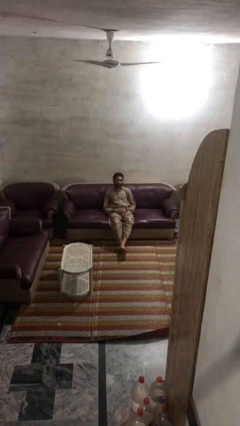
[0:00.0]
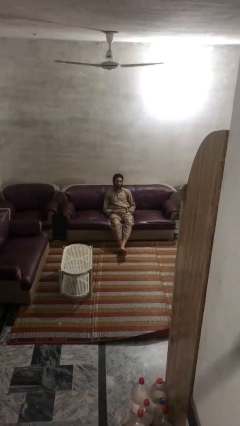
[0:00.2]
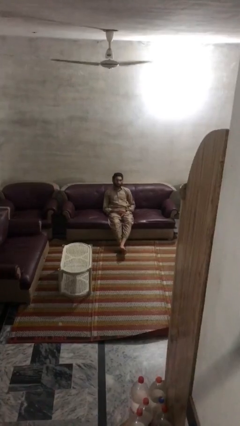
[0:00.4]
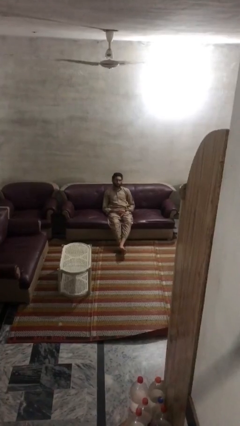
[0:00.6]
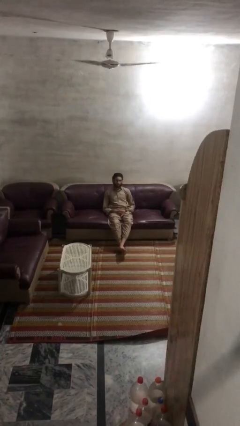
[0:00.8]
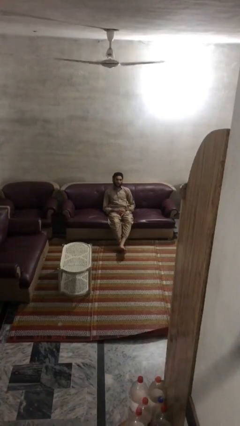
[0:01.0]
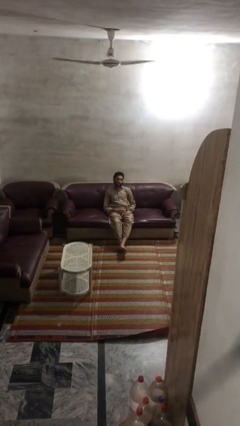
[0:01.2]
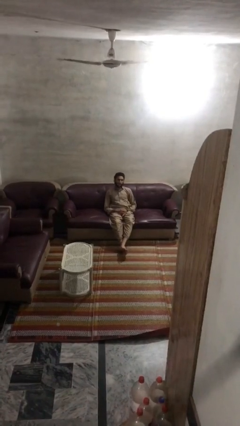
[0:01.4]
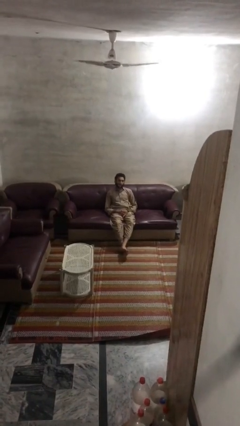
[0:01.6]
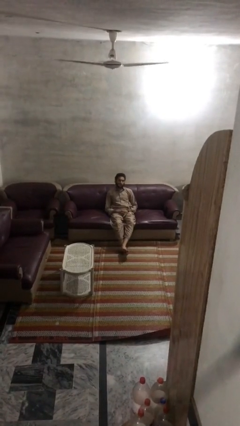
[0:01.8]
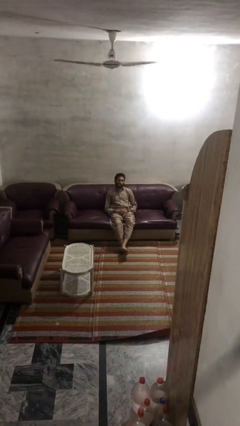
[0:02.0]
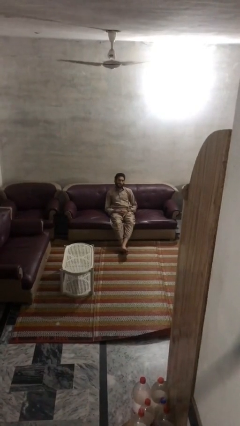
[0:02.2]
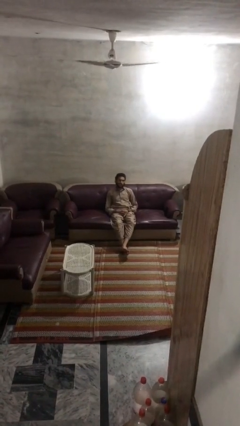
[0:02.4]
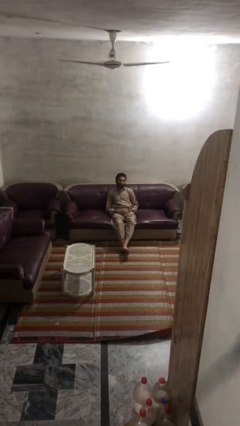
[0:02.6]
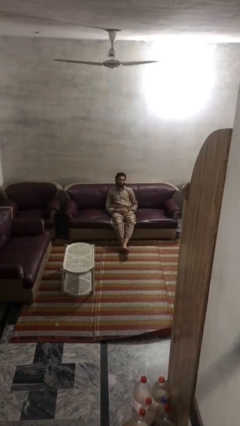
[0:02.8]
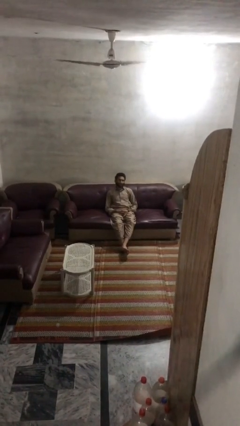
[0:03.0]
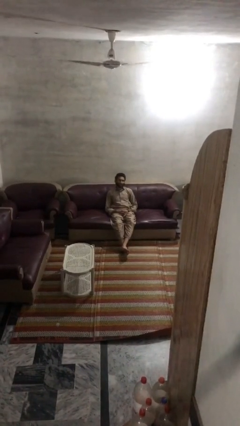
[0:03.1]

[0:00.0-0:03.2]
person sticks out tongue

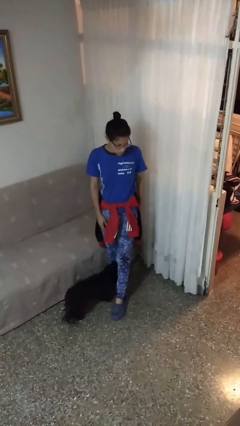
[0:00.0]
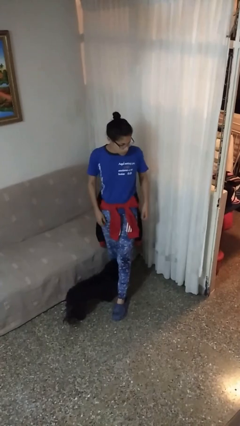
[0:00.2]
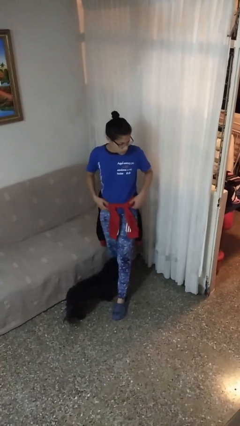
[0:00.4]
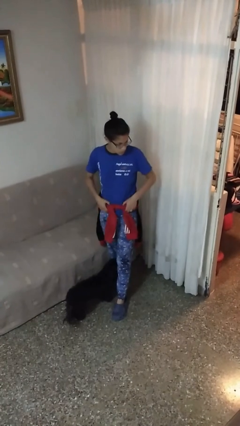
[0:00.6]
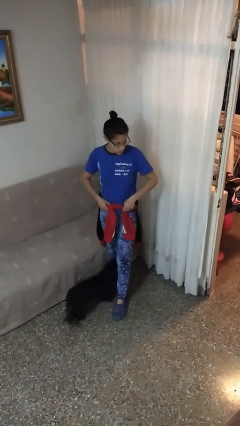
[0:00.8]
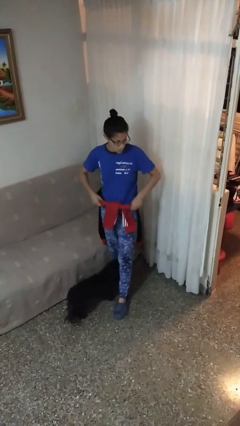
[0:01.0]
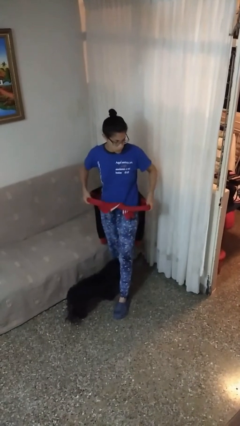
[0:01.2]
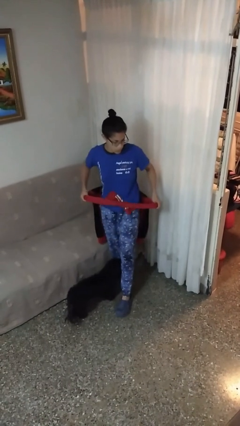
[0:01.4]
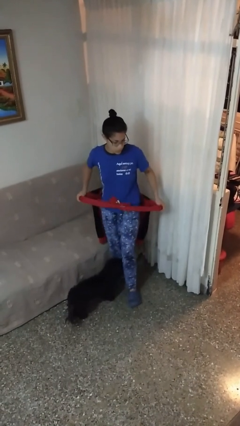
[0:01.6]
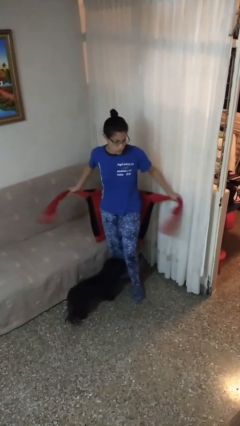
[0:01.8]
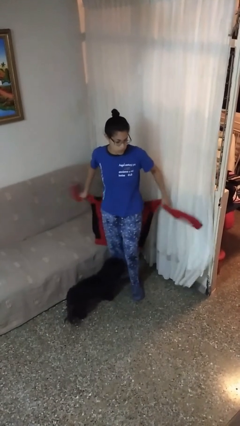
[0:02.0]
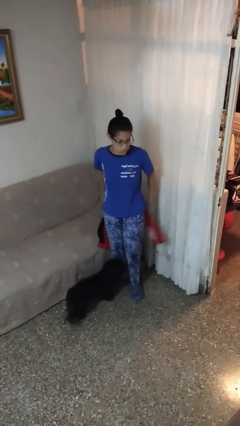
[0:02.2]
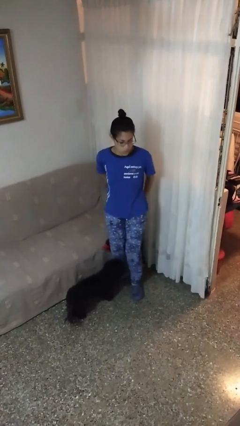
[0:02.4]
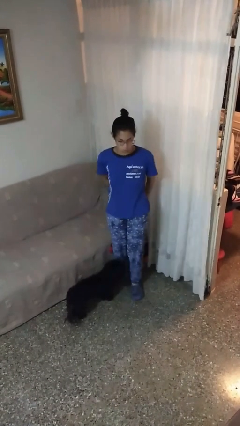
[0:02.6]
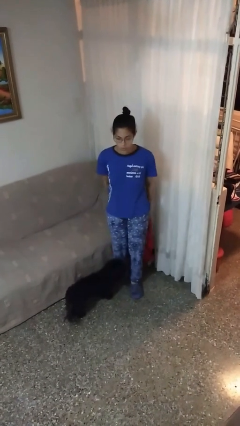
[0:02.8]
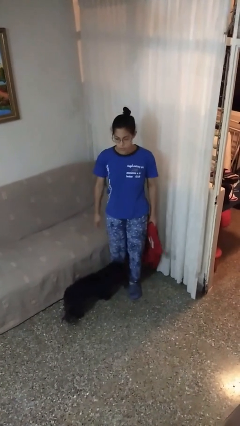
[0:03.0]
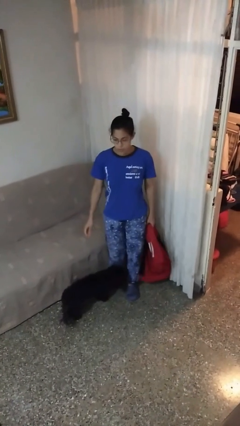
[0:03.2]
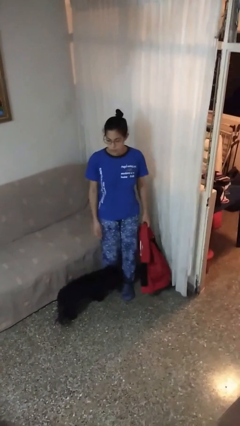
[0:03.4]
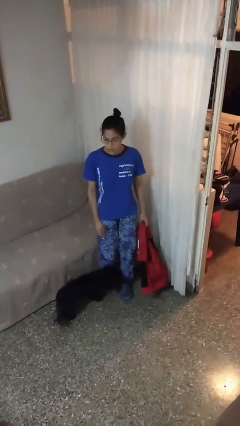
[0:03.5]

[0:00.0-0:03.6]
person unties jacket around waist

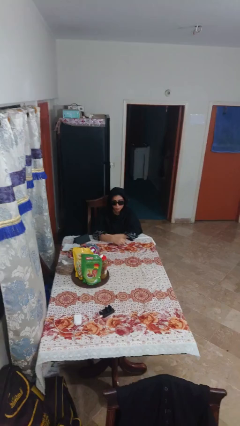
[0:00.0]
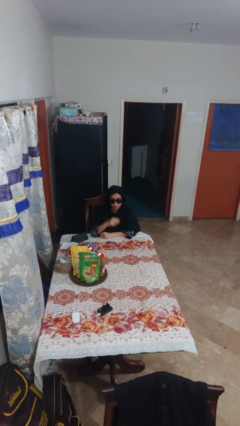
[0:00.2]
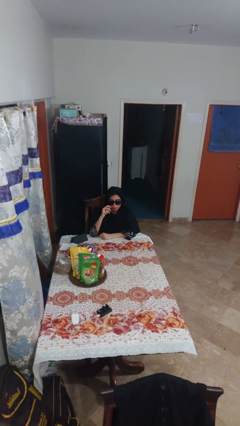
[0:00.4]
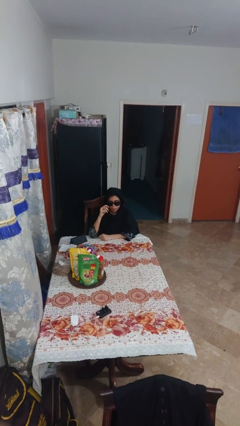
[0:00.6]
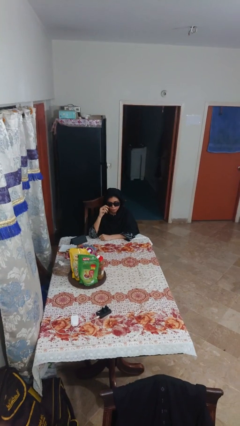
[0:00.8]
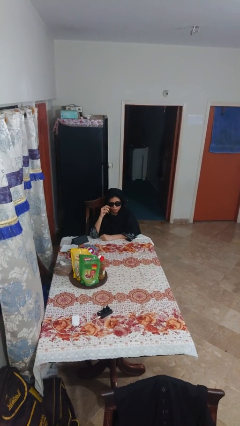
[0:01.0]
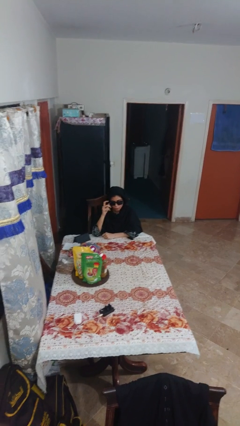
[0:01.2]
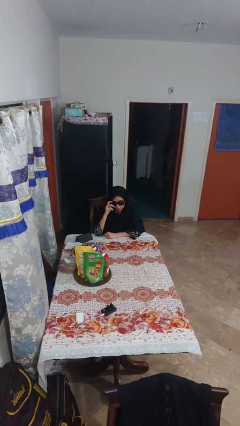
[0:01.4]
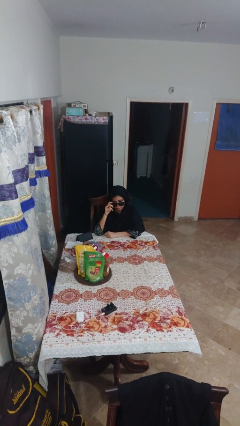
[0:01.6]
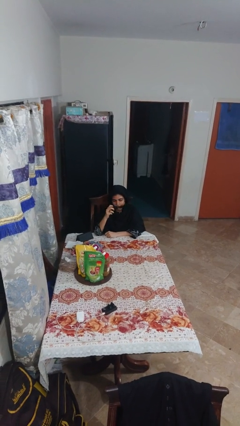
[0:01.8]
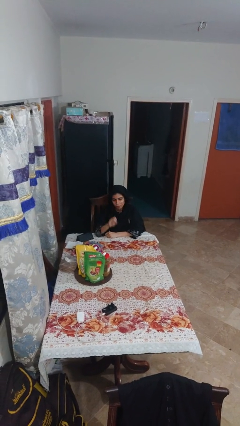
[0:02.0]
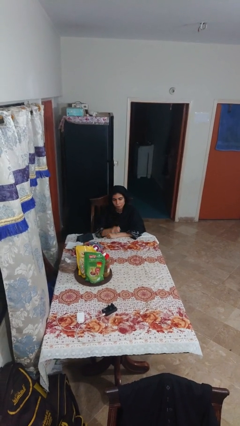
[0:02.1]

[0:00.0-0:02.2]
person takes off sunglasses

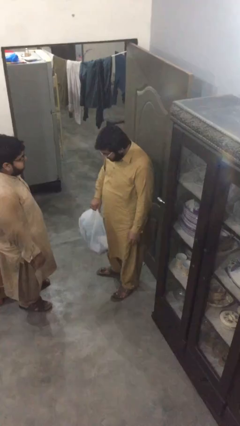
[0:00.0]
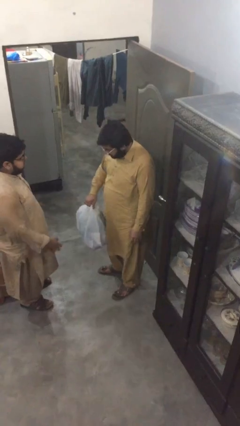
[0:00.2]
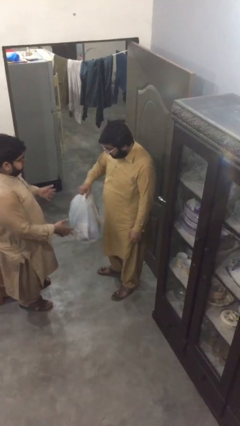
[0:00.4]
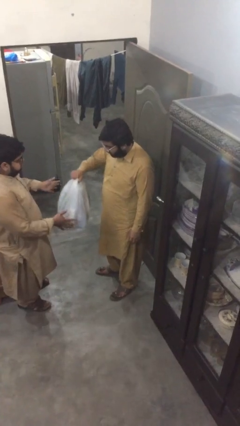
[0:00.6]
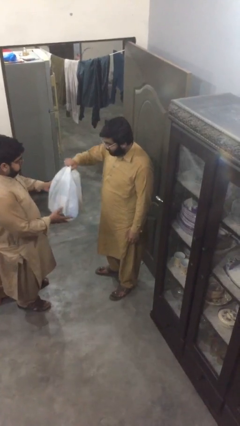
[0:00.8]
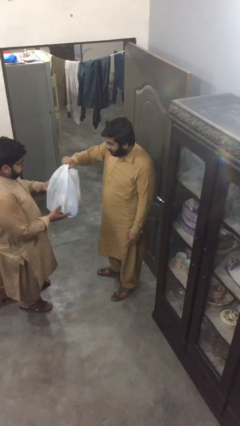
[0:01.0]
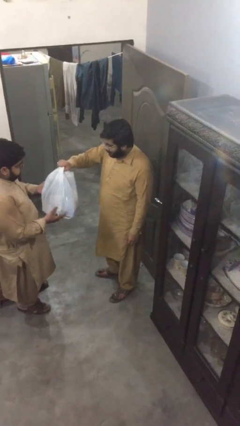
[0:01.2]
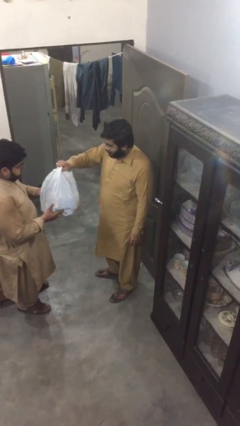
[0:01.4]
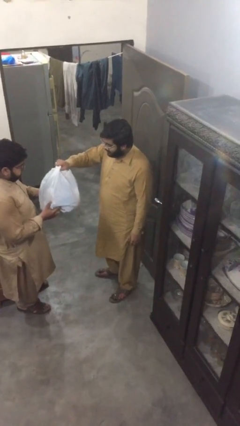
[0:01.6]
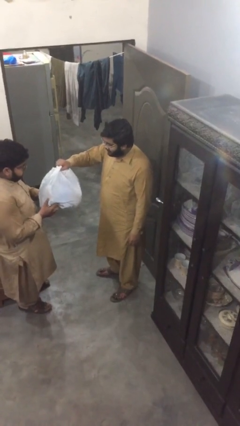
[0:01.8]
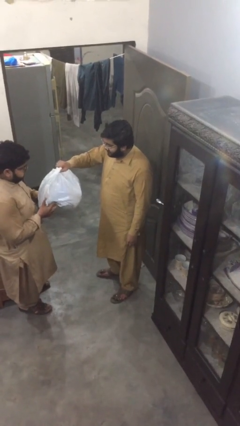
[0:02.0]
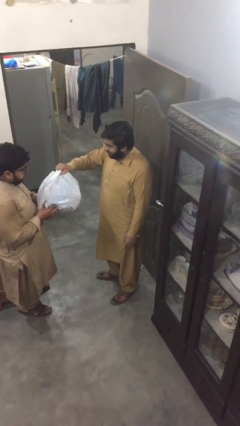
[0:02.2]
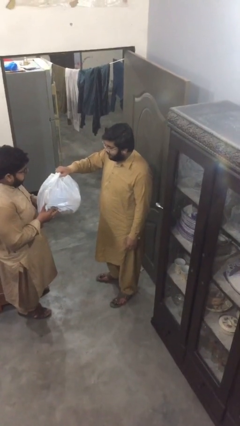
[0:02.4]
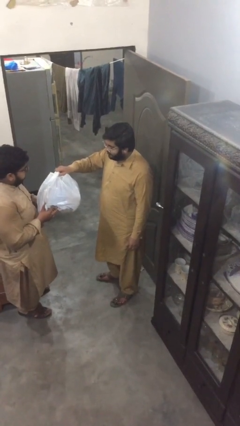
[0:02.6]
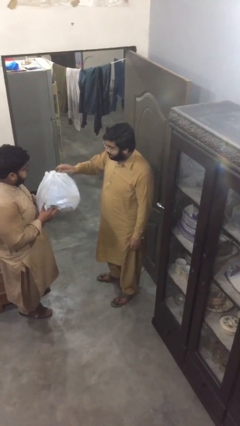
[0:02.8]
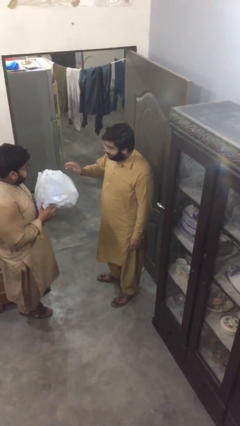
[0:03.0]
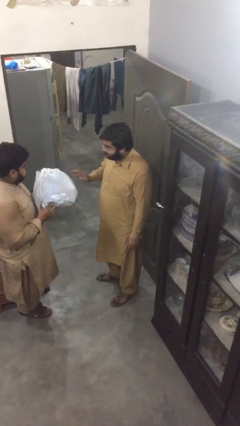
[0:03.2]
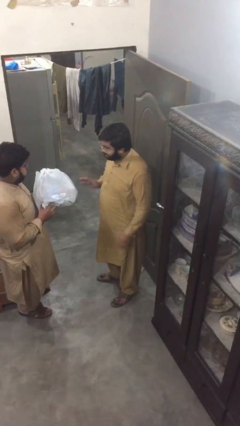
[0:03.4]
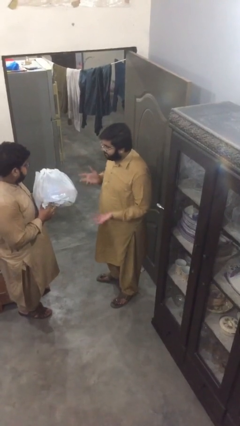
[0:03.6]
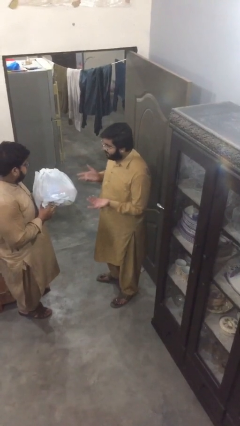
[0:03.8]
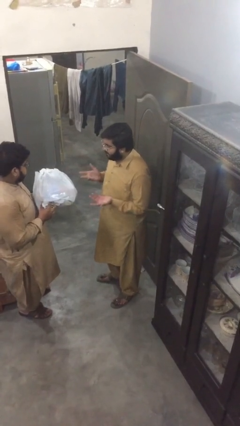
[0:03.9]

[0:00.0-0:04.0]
person transfers object to person

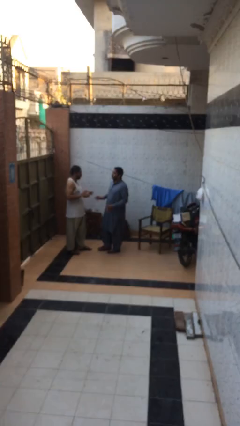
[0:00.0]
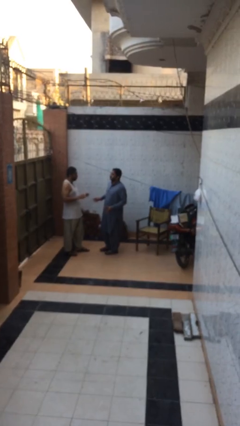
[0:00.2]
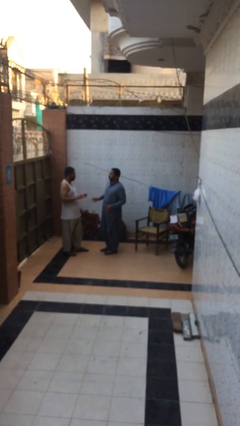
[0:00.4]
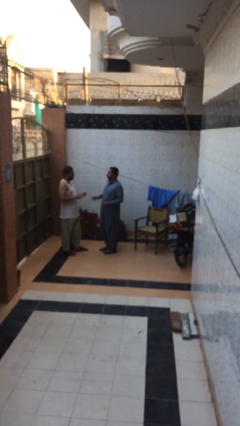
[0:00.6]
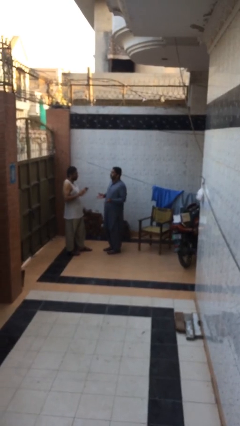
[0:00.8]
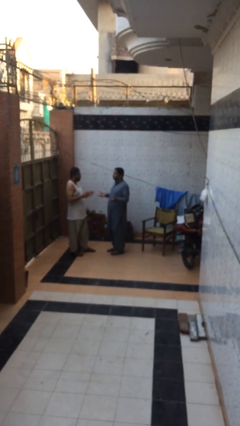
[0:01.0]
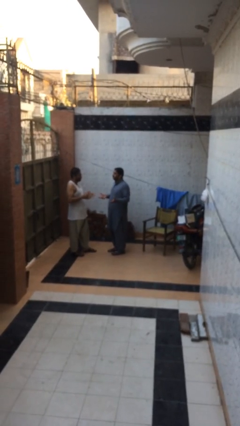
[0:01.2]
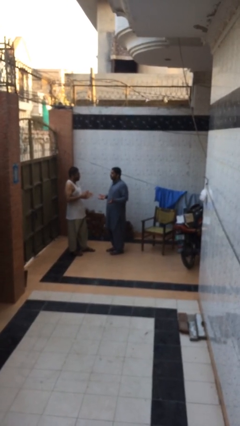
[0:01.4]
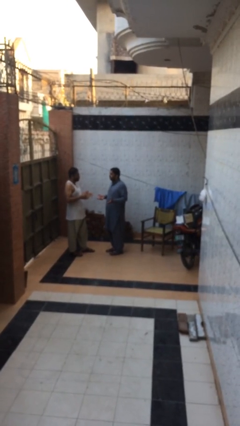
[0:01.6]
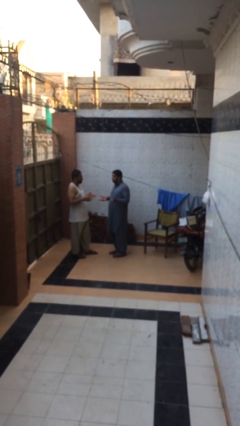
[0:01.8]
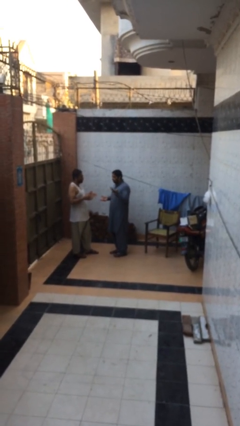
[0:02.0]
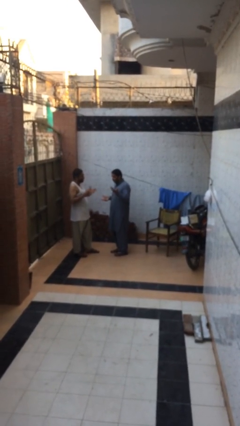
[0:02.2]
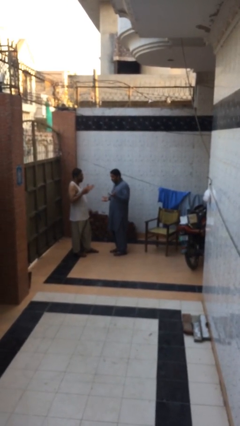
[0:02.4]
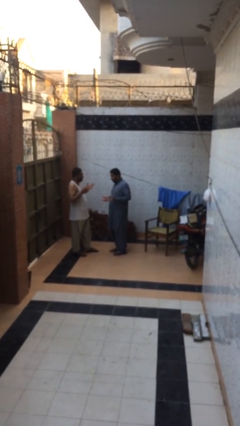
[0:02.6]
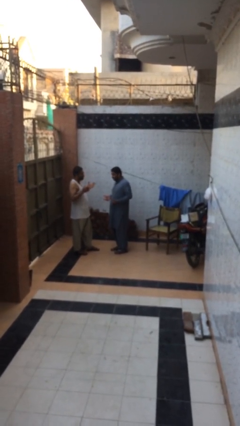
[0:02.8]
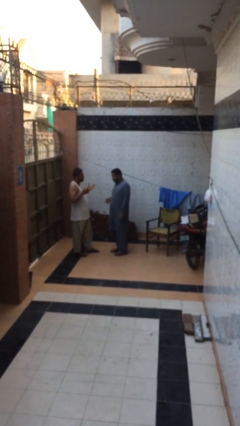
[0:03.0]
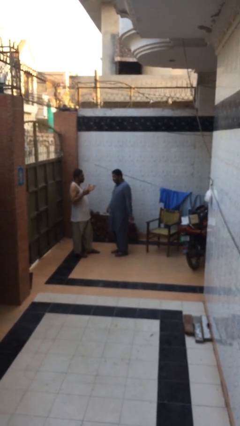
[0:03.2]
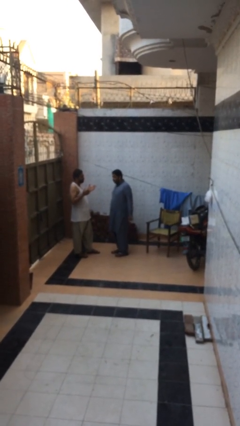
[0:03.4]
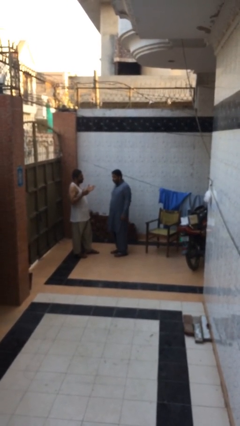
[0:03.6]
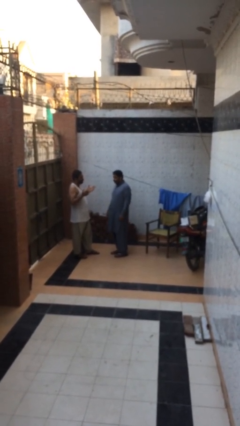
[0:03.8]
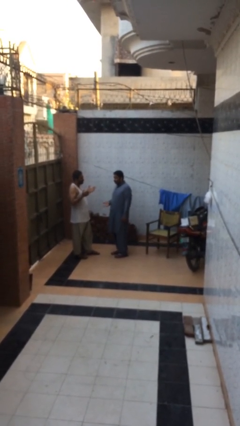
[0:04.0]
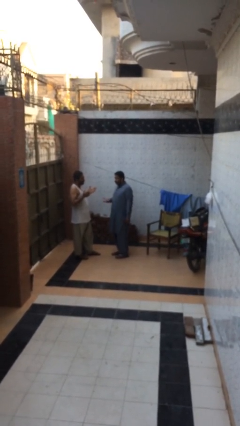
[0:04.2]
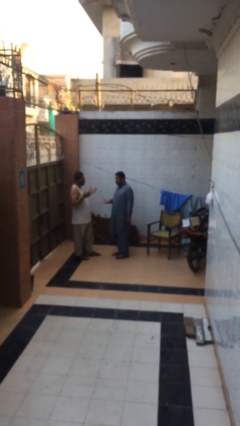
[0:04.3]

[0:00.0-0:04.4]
person talks to person

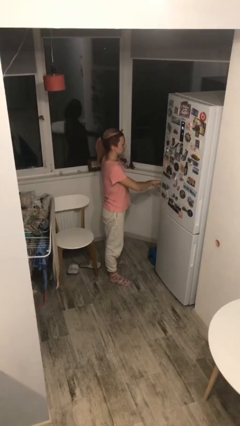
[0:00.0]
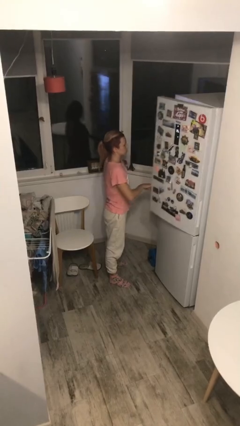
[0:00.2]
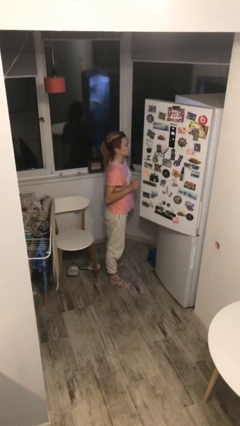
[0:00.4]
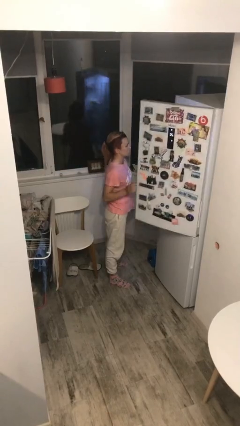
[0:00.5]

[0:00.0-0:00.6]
person opens refrigerator
